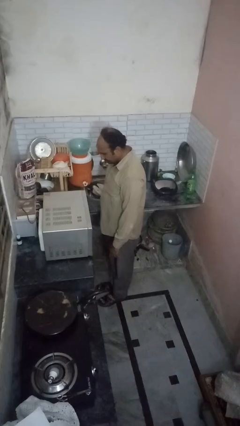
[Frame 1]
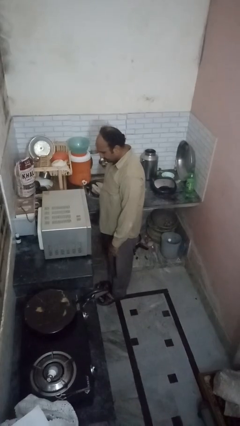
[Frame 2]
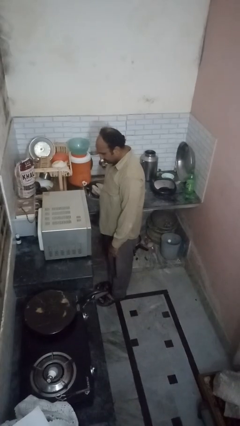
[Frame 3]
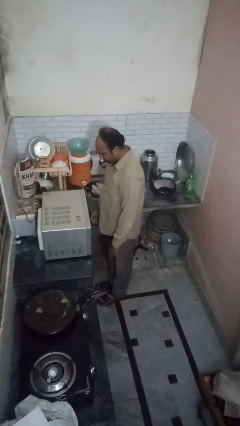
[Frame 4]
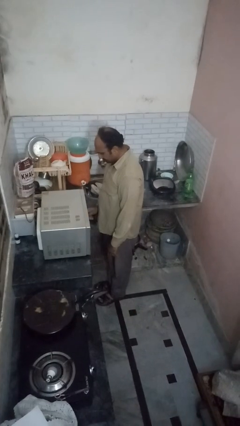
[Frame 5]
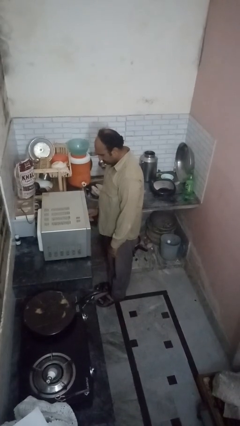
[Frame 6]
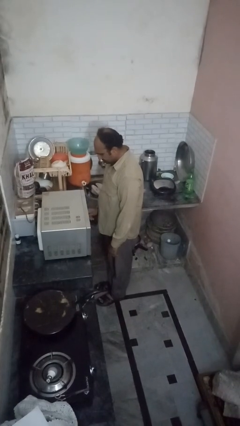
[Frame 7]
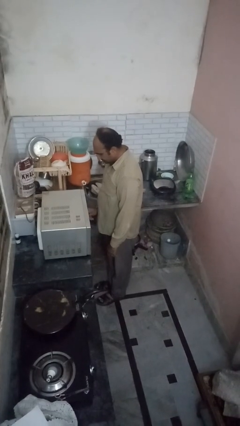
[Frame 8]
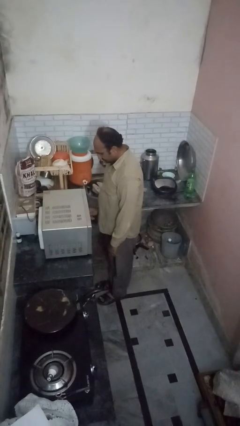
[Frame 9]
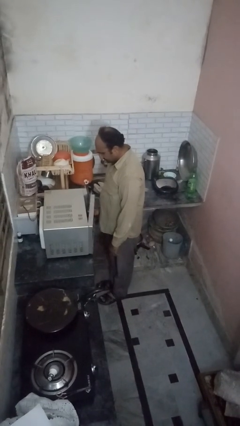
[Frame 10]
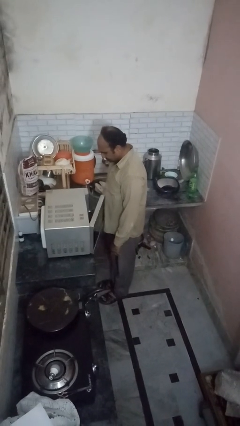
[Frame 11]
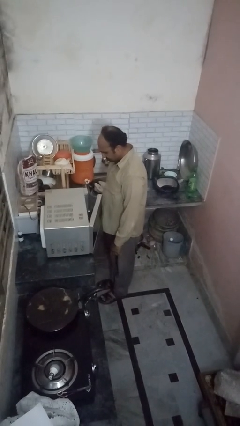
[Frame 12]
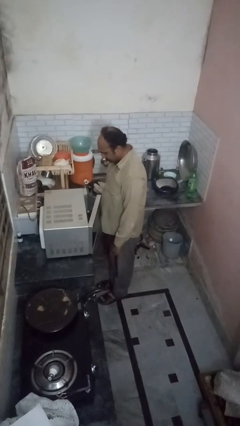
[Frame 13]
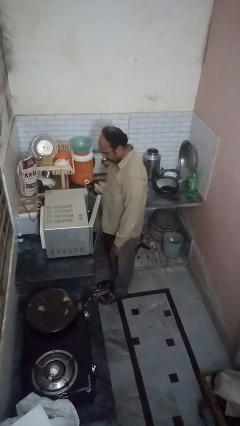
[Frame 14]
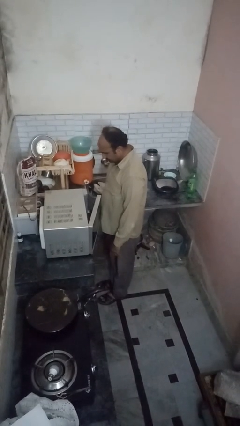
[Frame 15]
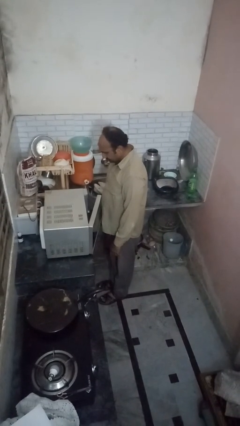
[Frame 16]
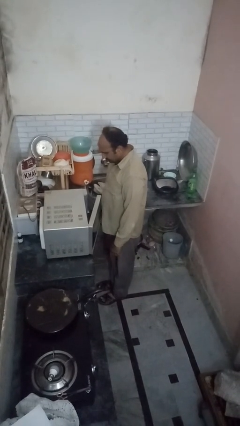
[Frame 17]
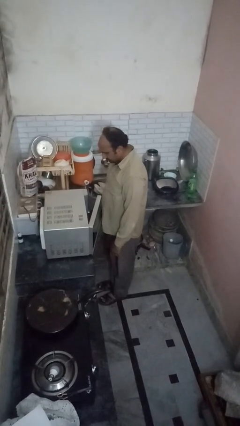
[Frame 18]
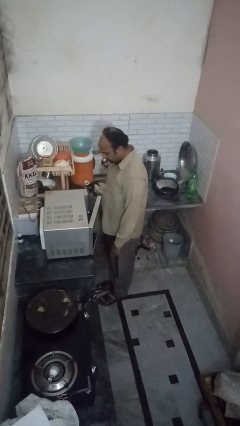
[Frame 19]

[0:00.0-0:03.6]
person opens oven door

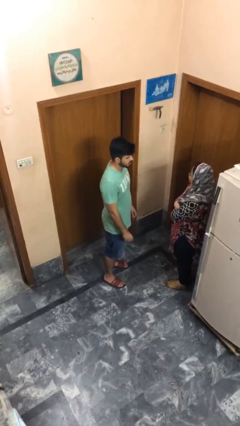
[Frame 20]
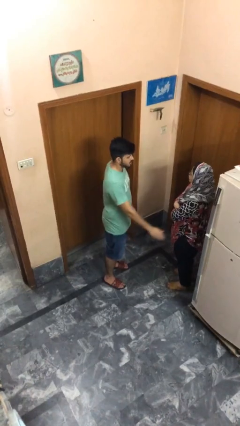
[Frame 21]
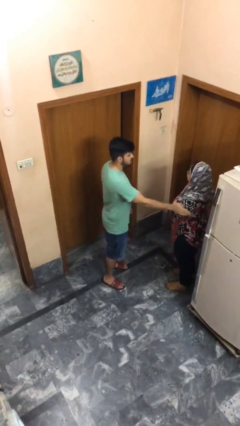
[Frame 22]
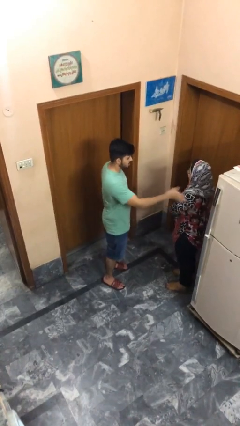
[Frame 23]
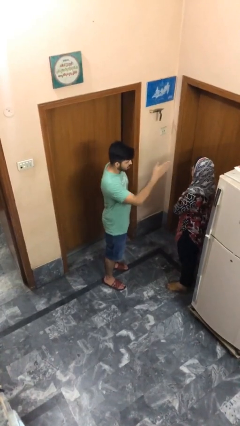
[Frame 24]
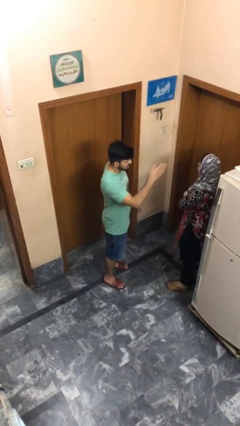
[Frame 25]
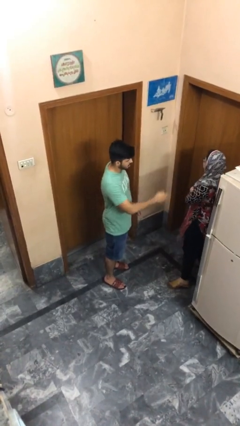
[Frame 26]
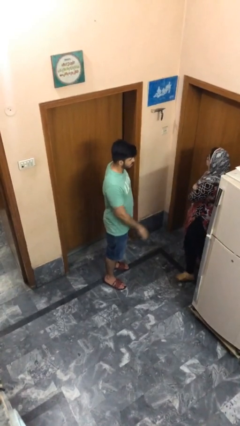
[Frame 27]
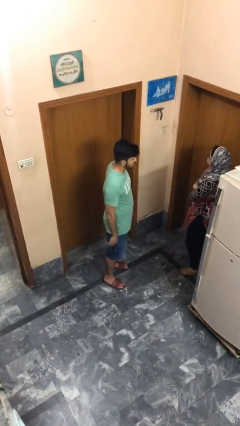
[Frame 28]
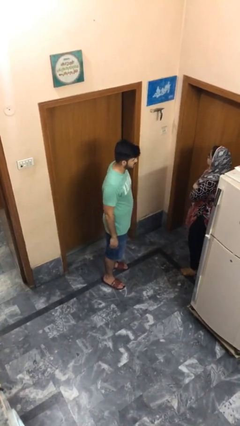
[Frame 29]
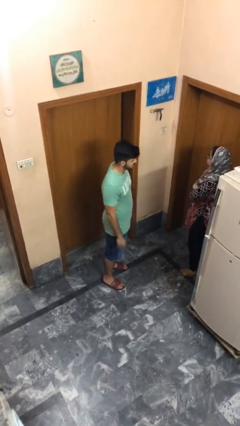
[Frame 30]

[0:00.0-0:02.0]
person shoves person

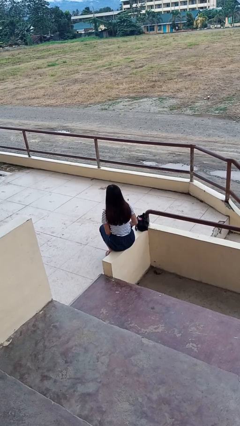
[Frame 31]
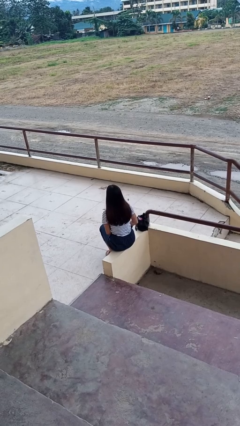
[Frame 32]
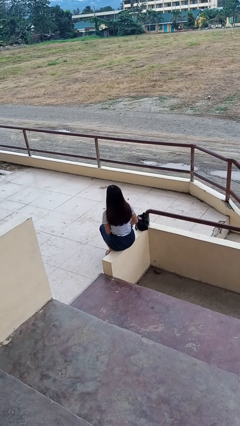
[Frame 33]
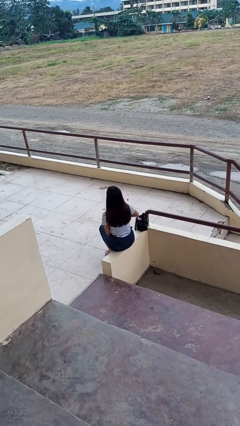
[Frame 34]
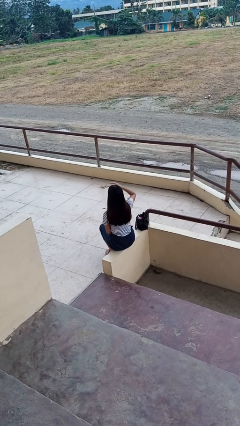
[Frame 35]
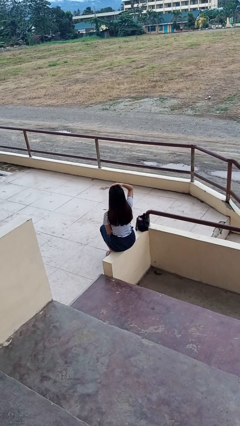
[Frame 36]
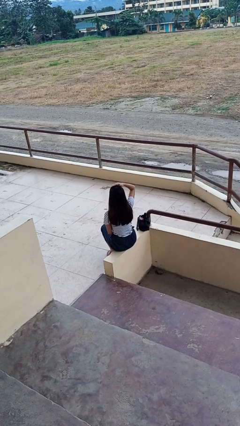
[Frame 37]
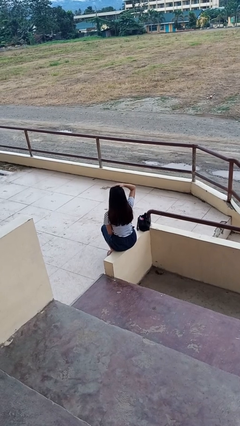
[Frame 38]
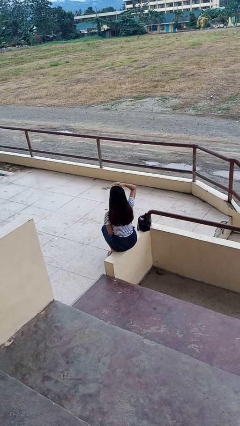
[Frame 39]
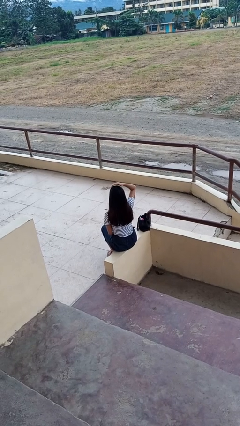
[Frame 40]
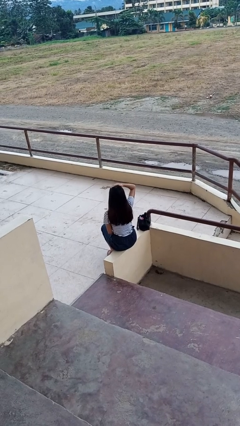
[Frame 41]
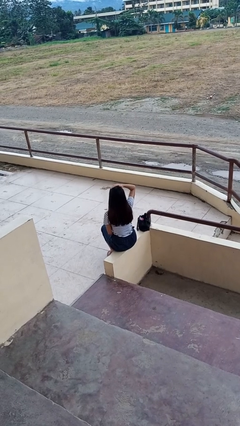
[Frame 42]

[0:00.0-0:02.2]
person pats head

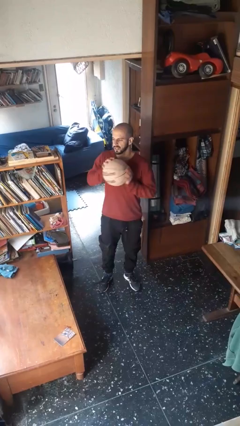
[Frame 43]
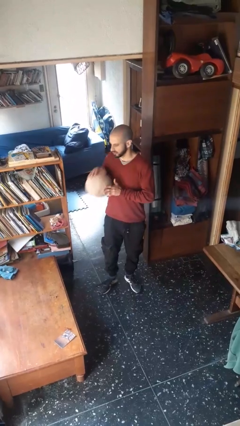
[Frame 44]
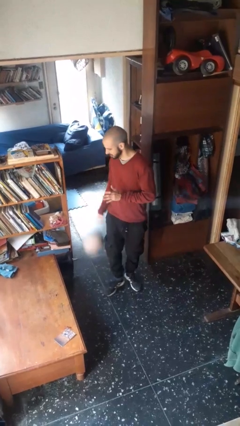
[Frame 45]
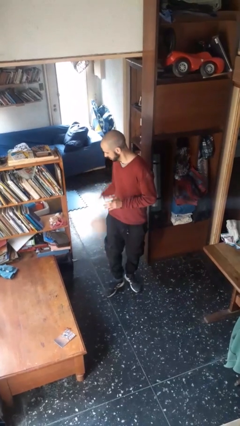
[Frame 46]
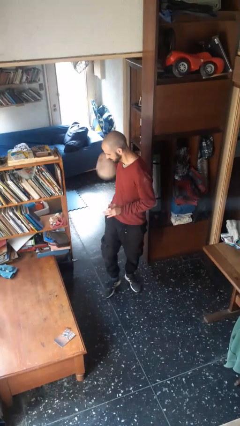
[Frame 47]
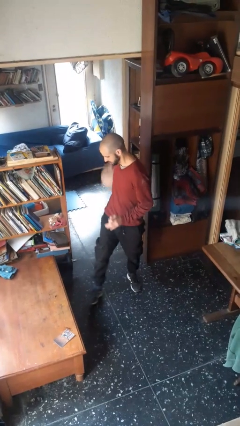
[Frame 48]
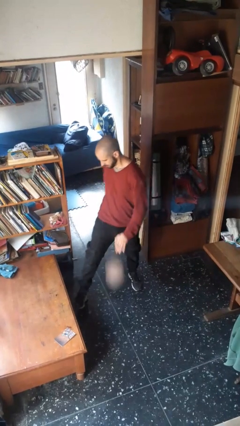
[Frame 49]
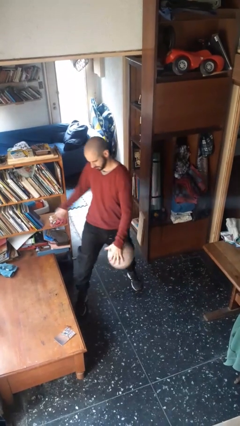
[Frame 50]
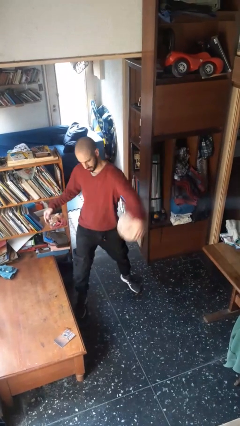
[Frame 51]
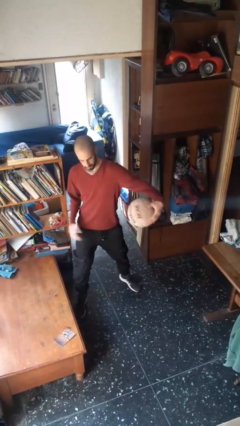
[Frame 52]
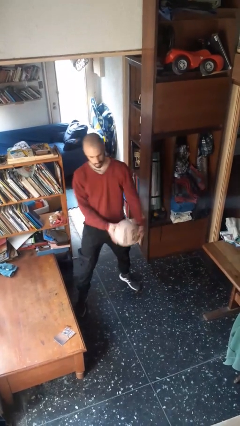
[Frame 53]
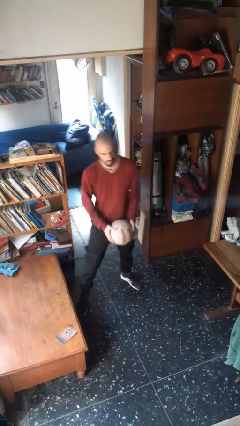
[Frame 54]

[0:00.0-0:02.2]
person bounces ball on floor

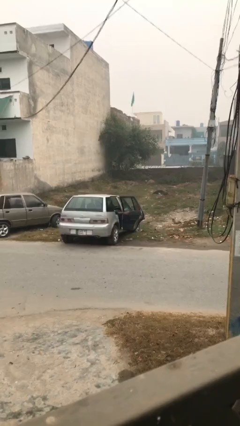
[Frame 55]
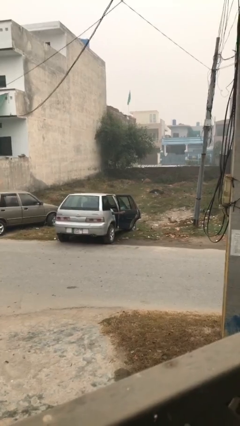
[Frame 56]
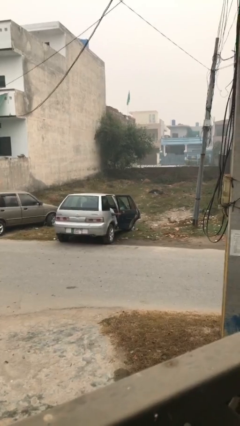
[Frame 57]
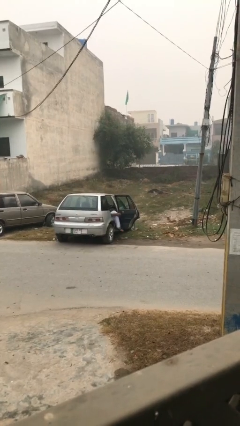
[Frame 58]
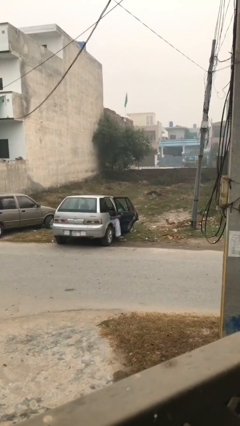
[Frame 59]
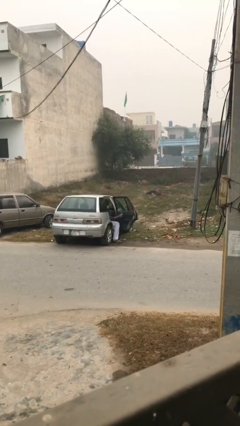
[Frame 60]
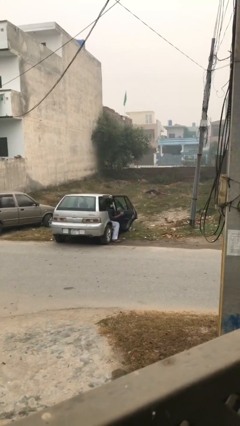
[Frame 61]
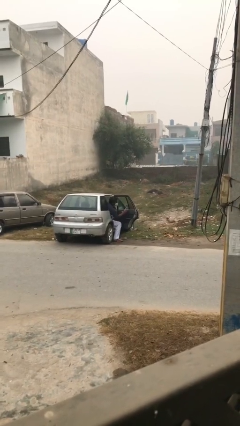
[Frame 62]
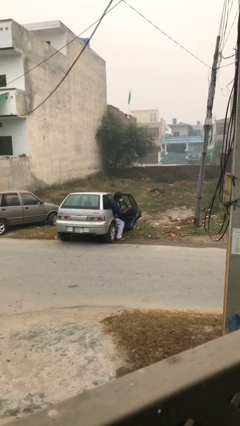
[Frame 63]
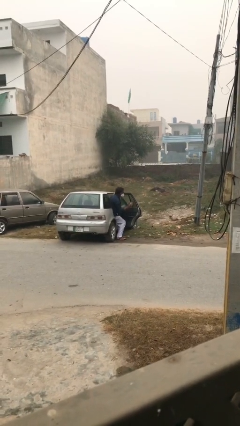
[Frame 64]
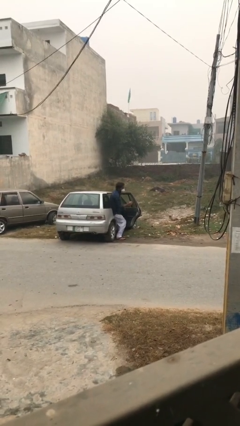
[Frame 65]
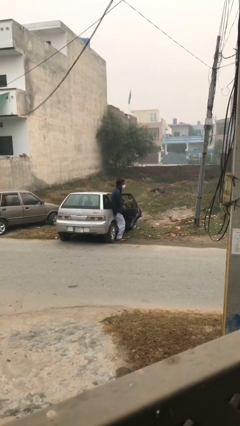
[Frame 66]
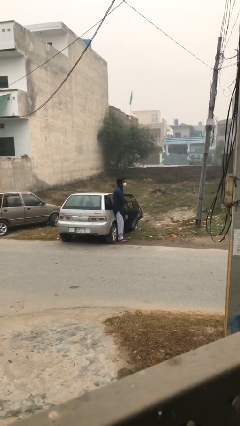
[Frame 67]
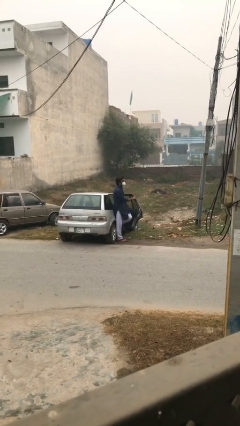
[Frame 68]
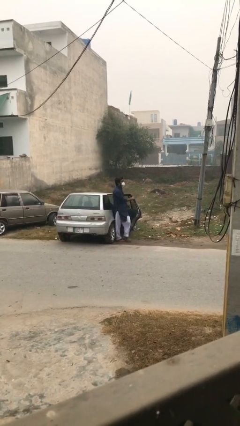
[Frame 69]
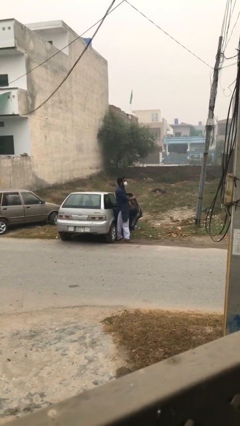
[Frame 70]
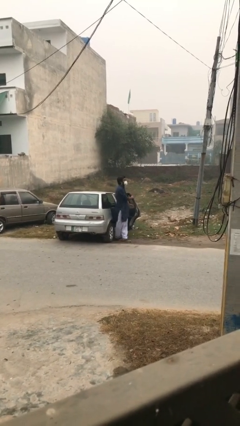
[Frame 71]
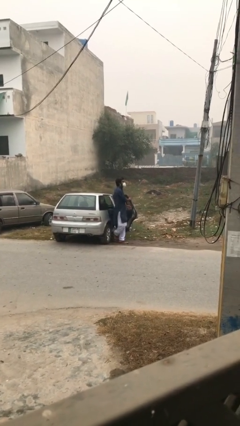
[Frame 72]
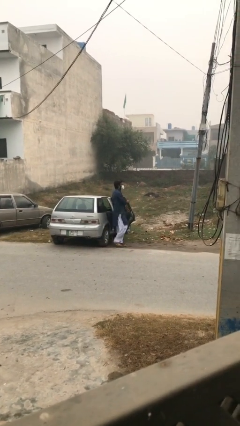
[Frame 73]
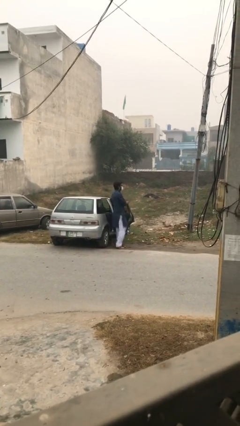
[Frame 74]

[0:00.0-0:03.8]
person exits car

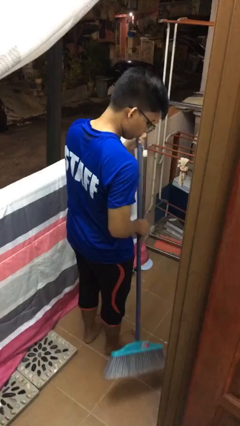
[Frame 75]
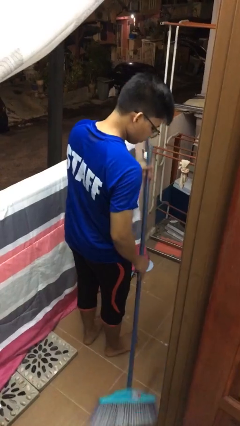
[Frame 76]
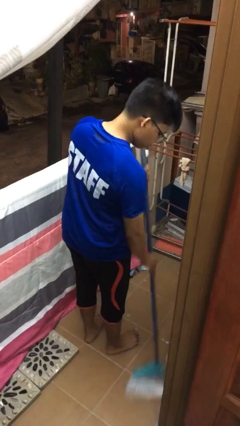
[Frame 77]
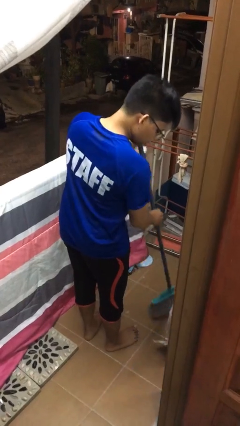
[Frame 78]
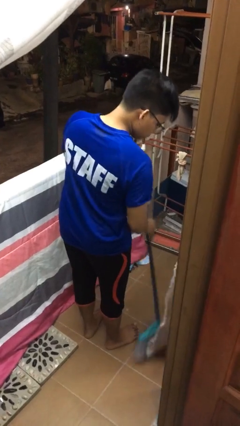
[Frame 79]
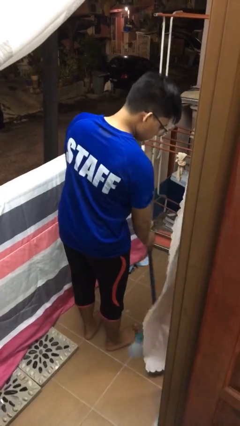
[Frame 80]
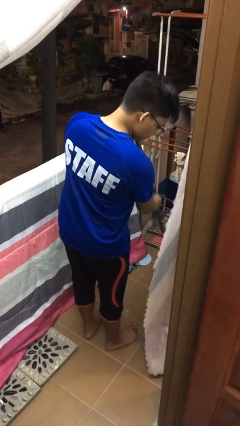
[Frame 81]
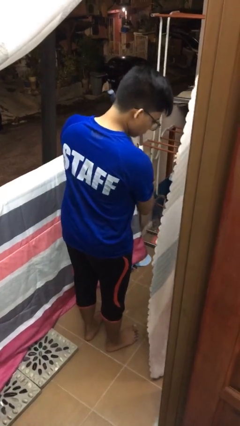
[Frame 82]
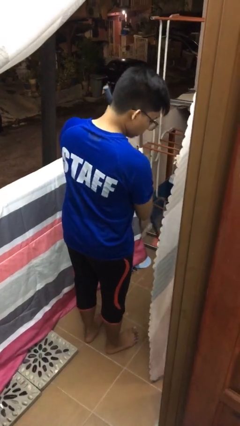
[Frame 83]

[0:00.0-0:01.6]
person sweeps floor

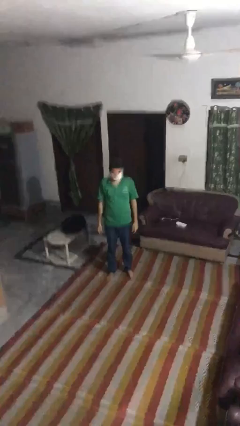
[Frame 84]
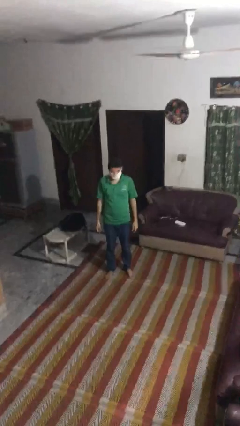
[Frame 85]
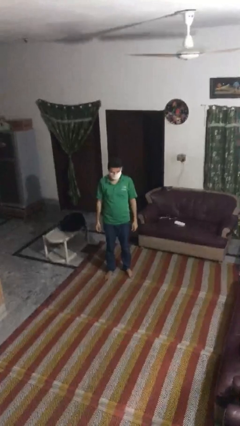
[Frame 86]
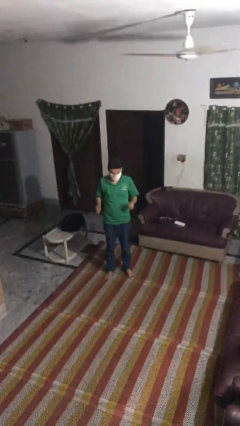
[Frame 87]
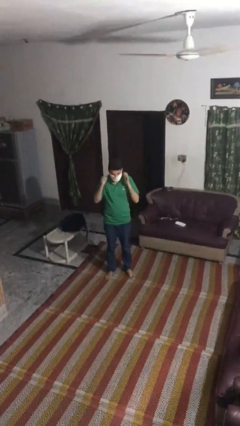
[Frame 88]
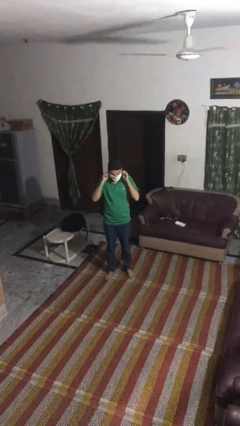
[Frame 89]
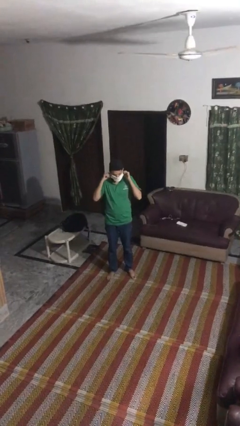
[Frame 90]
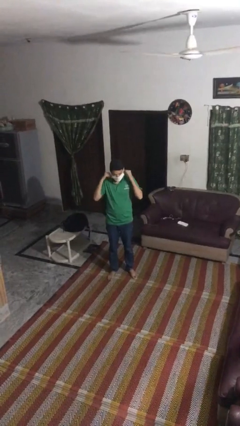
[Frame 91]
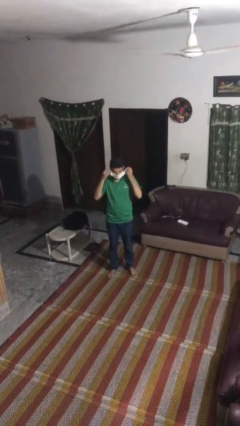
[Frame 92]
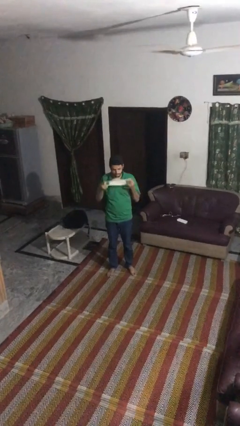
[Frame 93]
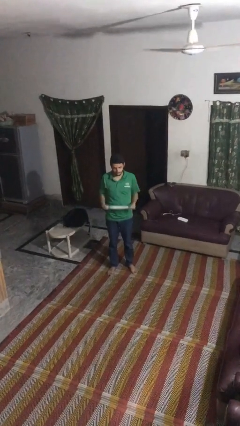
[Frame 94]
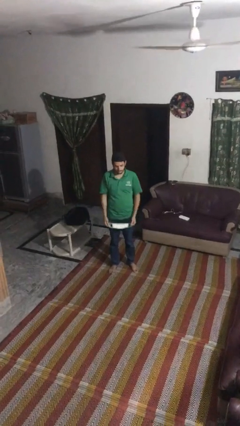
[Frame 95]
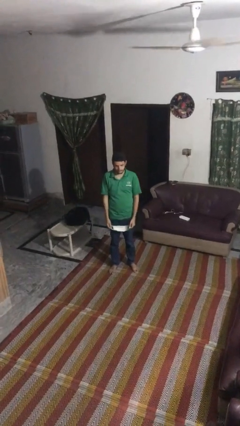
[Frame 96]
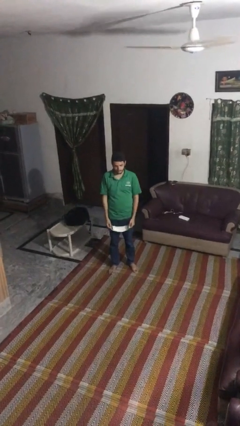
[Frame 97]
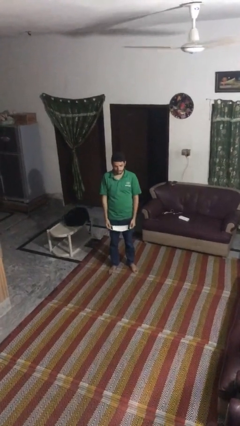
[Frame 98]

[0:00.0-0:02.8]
person takes off facemask
